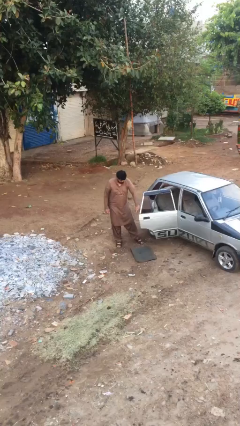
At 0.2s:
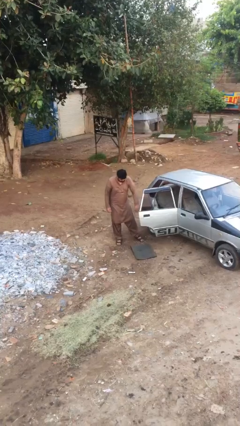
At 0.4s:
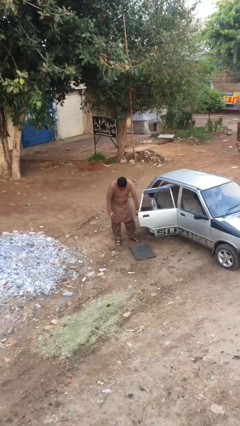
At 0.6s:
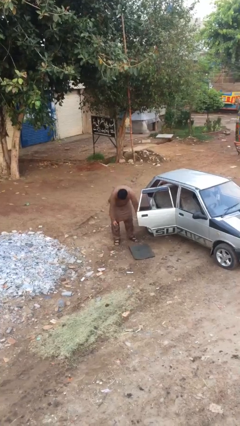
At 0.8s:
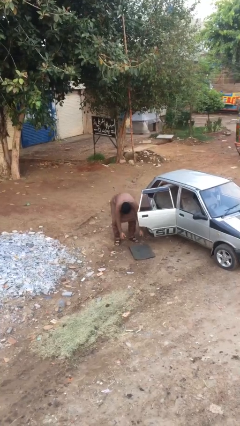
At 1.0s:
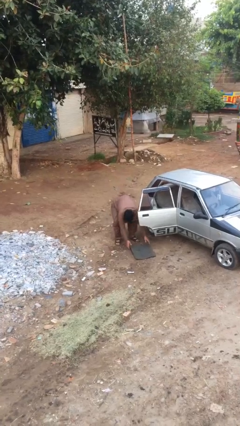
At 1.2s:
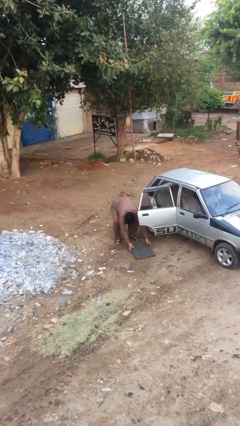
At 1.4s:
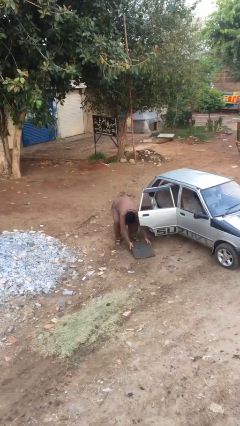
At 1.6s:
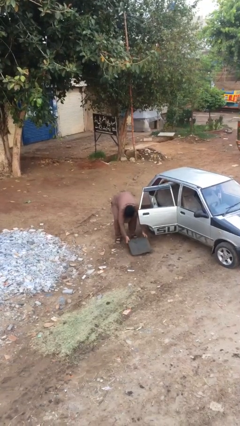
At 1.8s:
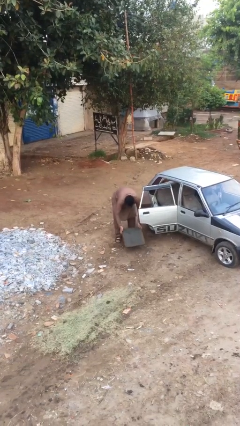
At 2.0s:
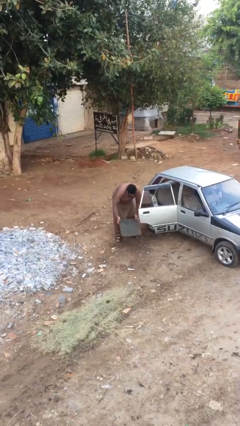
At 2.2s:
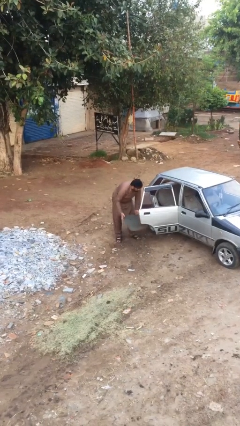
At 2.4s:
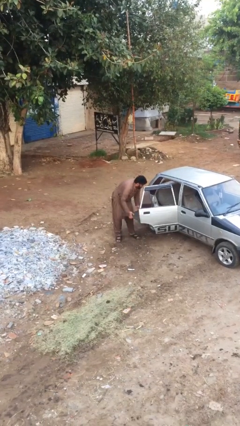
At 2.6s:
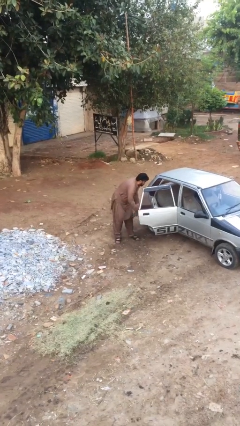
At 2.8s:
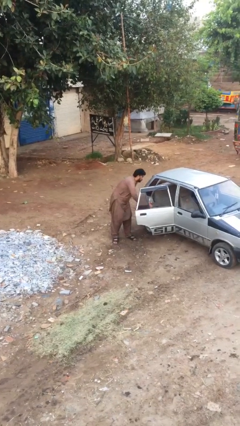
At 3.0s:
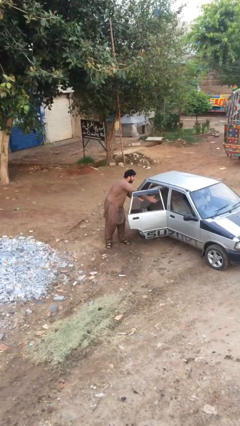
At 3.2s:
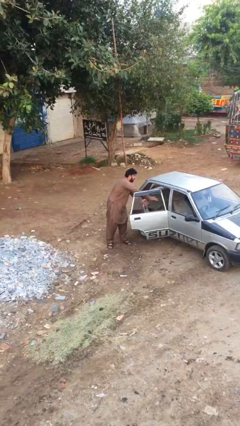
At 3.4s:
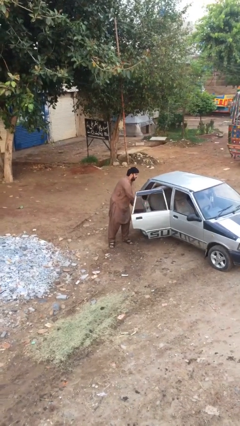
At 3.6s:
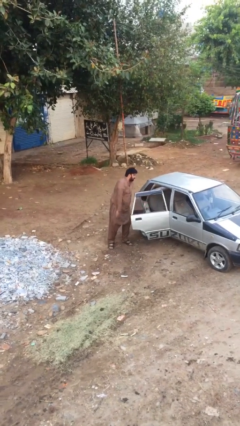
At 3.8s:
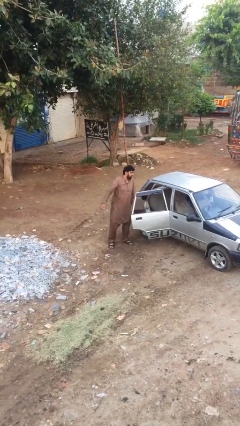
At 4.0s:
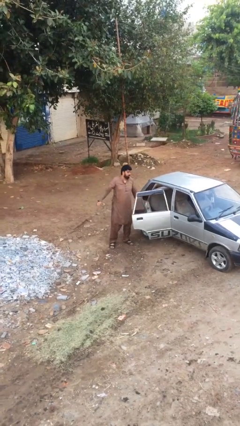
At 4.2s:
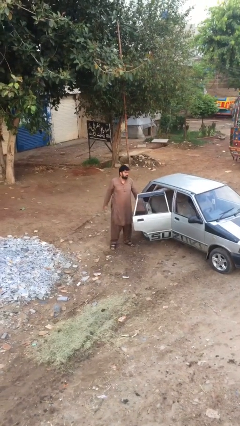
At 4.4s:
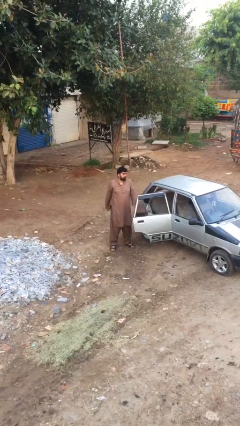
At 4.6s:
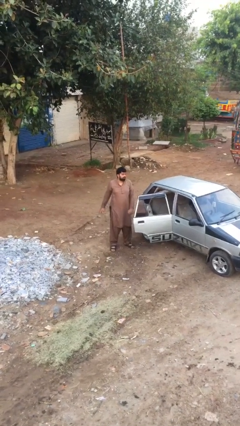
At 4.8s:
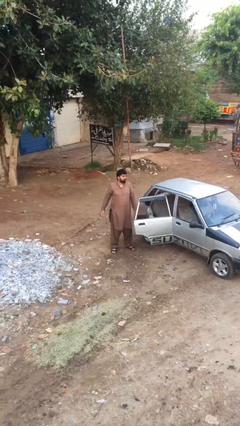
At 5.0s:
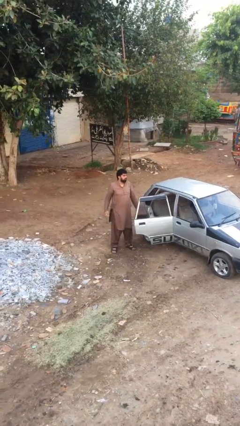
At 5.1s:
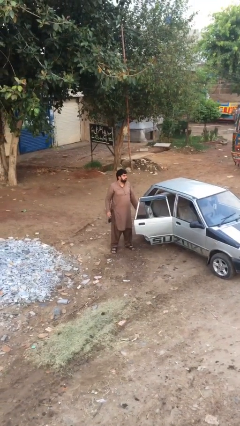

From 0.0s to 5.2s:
person loads car

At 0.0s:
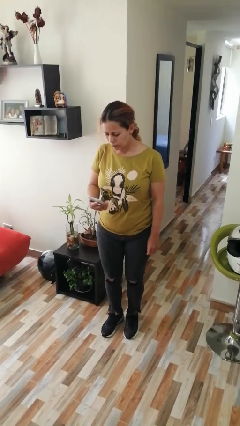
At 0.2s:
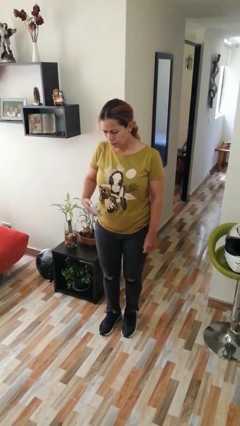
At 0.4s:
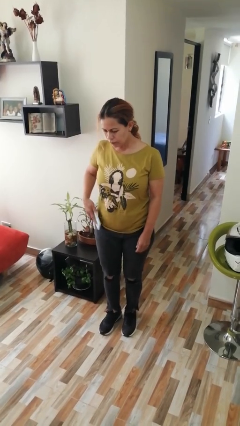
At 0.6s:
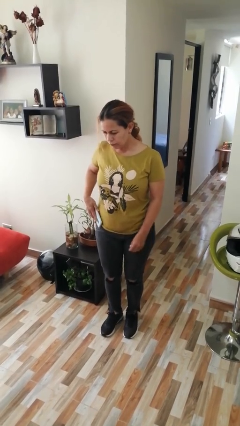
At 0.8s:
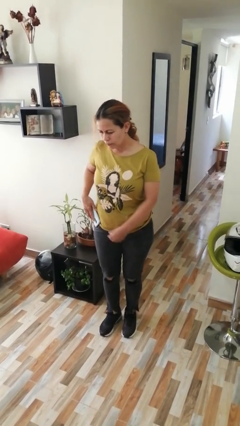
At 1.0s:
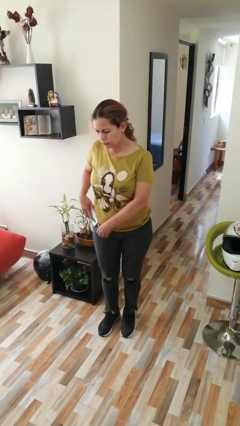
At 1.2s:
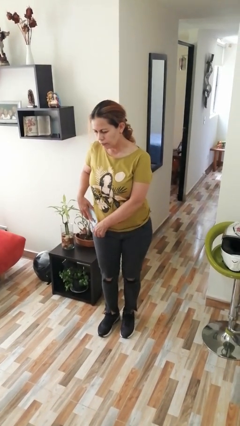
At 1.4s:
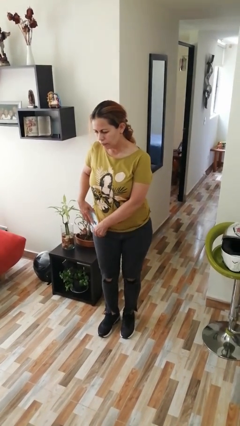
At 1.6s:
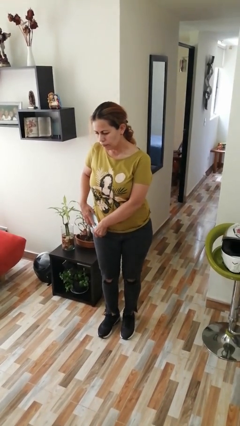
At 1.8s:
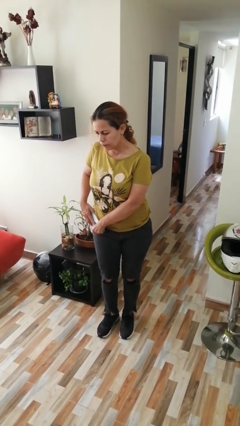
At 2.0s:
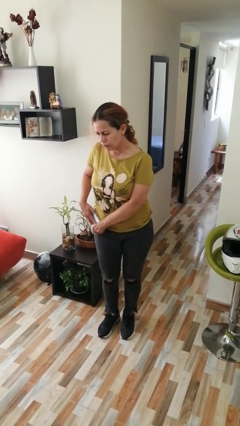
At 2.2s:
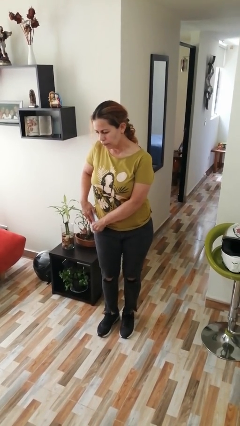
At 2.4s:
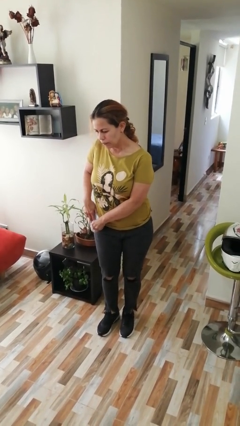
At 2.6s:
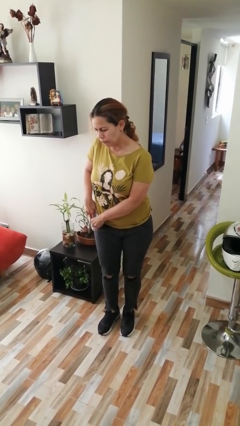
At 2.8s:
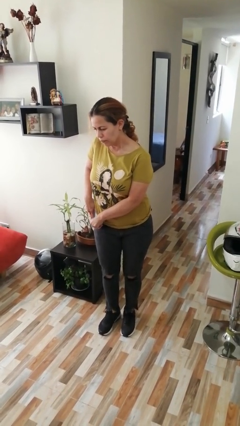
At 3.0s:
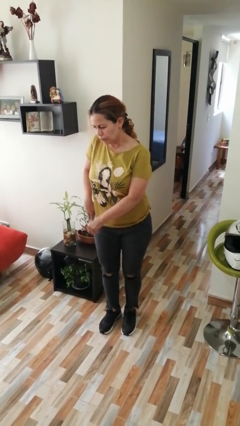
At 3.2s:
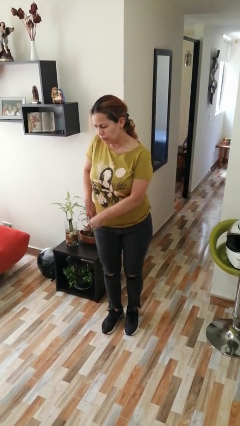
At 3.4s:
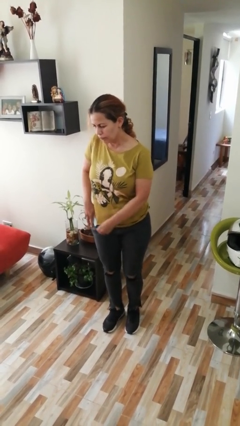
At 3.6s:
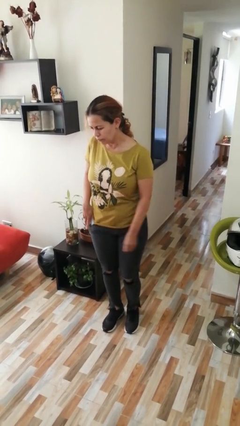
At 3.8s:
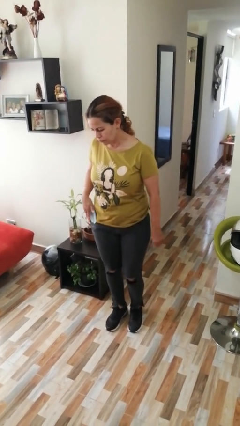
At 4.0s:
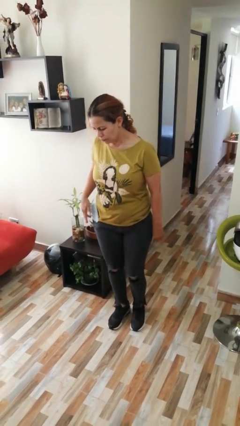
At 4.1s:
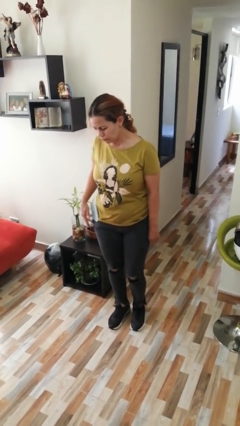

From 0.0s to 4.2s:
person takes phone from pocket

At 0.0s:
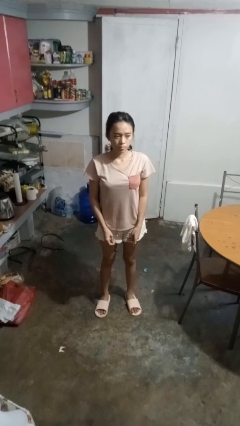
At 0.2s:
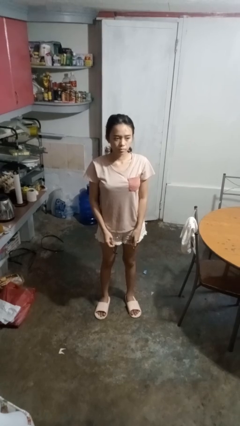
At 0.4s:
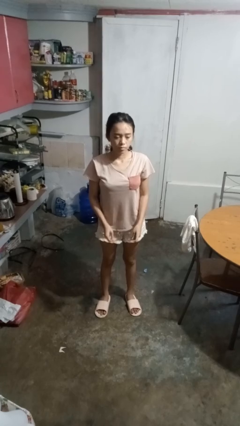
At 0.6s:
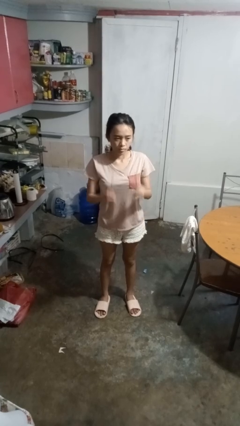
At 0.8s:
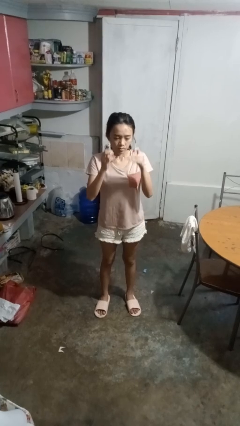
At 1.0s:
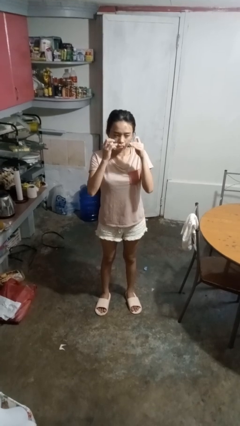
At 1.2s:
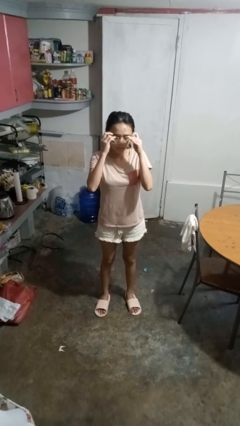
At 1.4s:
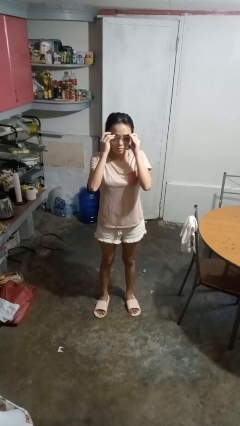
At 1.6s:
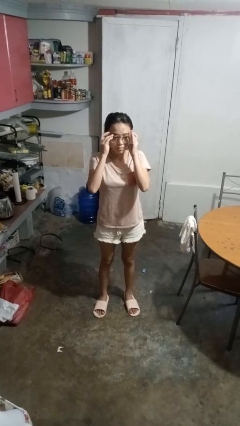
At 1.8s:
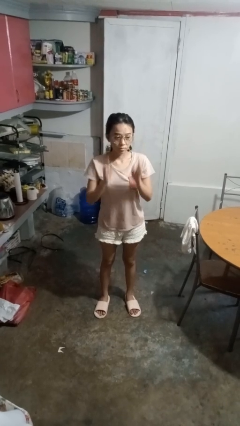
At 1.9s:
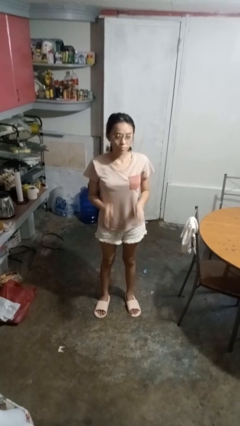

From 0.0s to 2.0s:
person puts on glasses

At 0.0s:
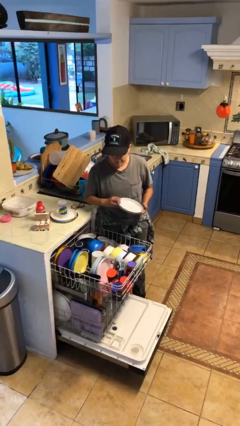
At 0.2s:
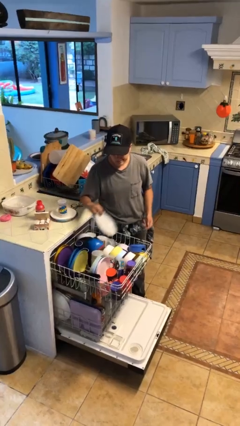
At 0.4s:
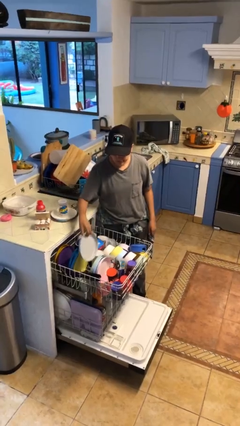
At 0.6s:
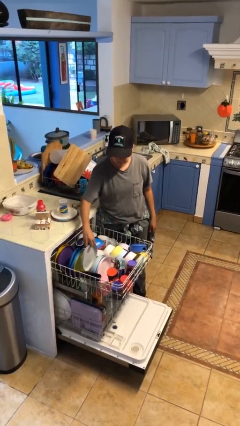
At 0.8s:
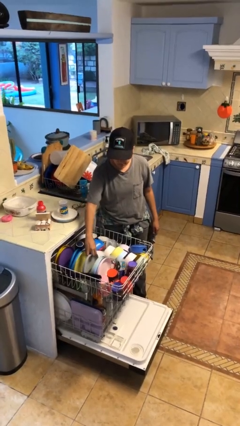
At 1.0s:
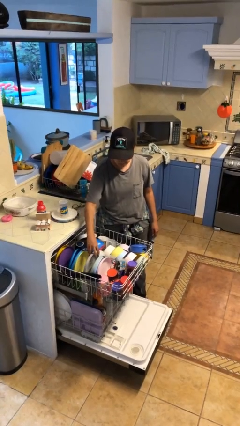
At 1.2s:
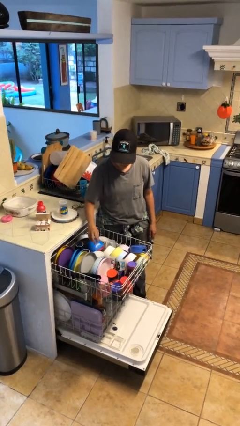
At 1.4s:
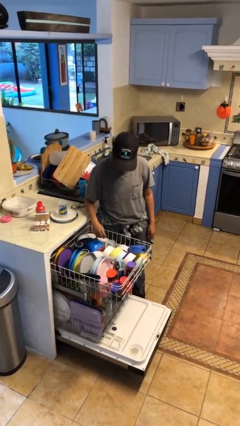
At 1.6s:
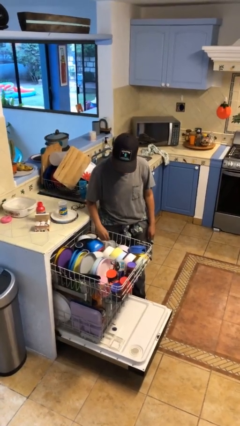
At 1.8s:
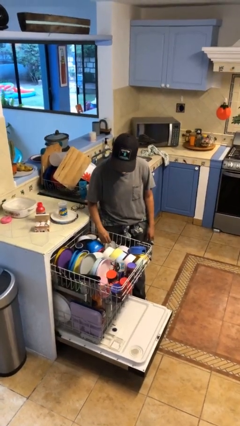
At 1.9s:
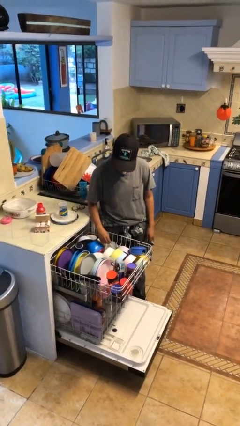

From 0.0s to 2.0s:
person loads dishwasher

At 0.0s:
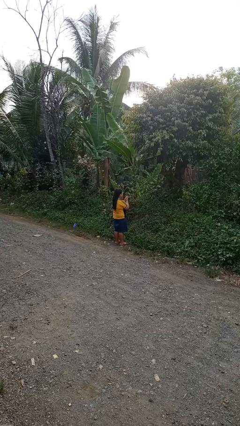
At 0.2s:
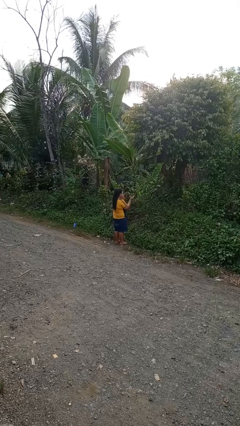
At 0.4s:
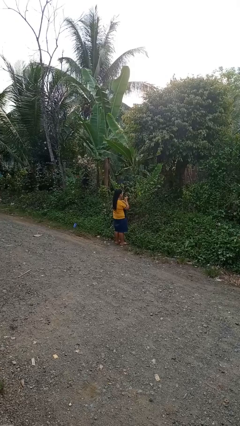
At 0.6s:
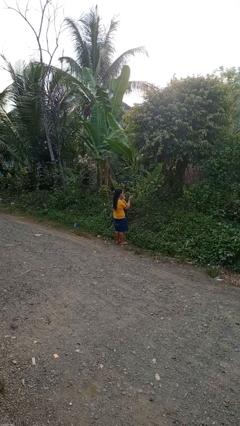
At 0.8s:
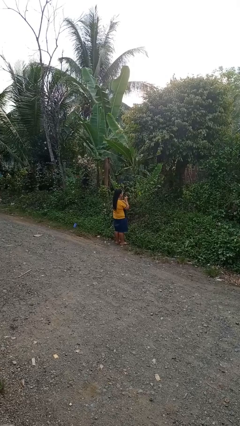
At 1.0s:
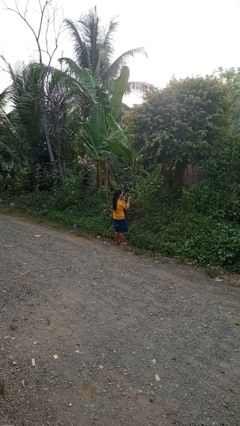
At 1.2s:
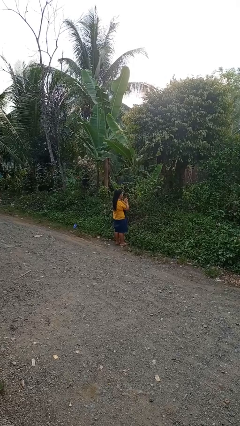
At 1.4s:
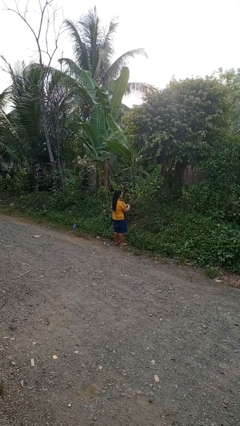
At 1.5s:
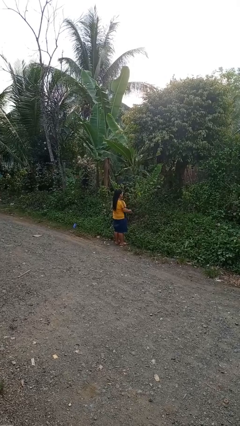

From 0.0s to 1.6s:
person claps hands

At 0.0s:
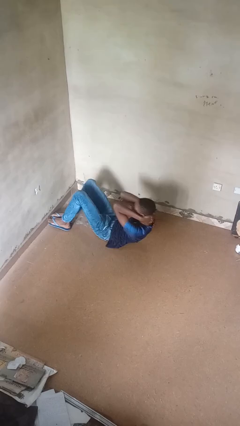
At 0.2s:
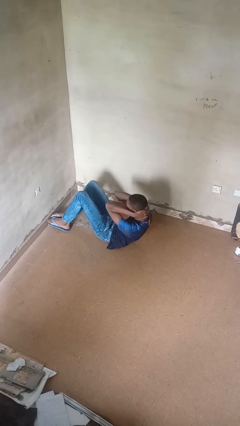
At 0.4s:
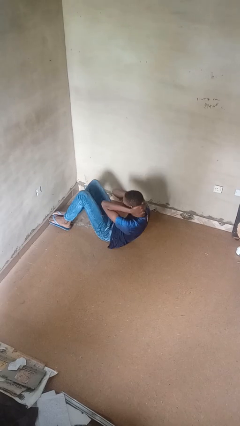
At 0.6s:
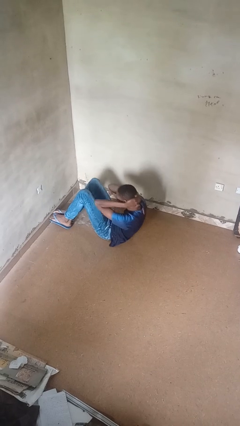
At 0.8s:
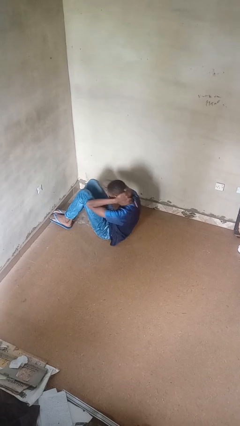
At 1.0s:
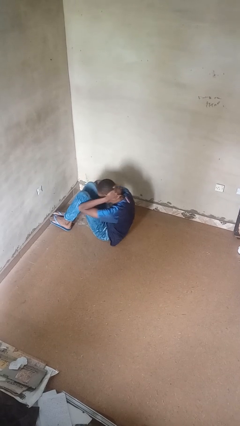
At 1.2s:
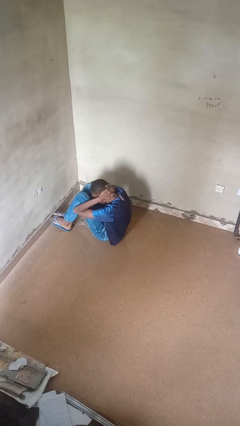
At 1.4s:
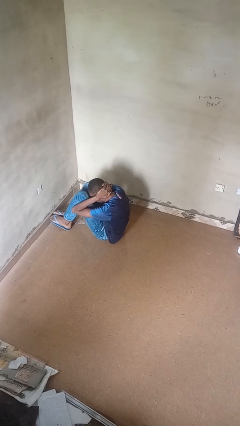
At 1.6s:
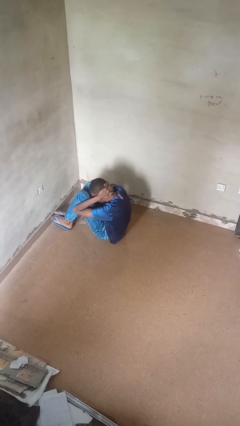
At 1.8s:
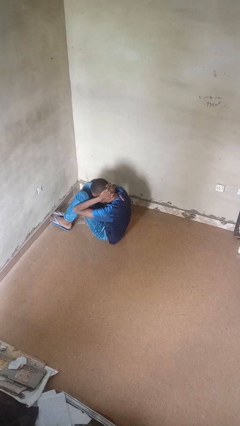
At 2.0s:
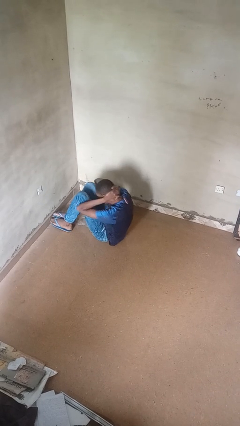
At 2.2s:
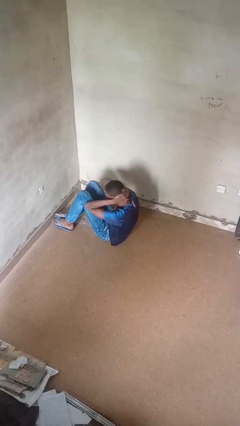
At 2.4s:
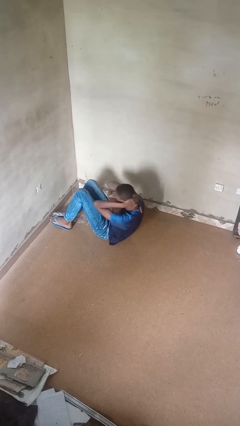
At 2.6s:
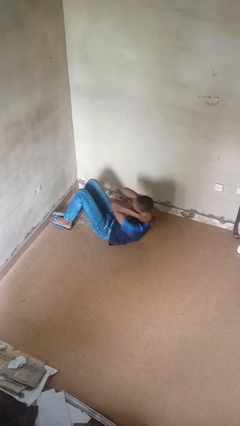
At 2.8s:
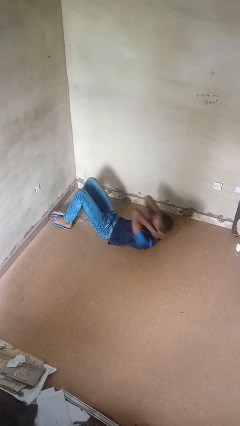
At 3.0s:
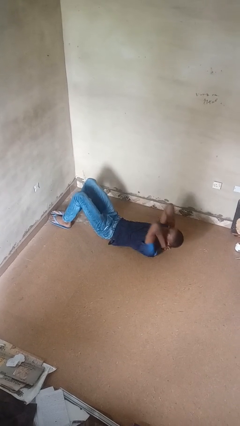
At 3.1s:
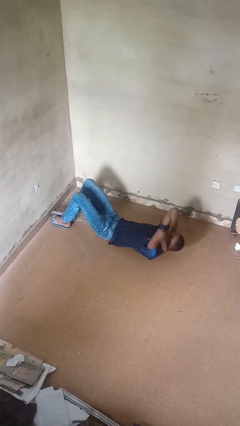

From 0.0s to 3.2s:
person exercises with situp
